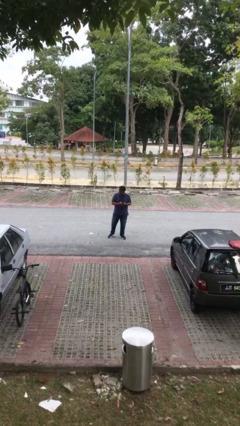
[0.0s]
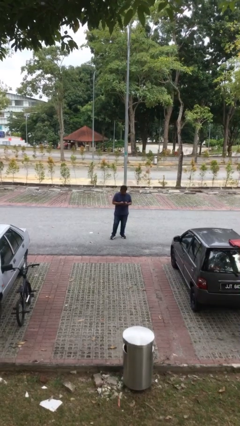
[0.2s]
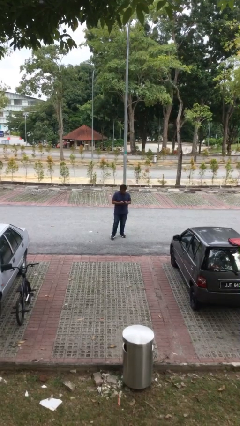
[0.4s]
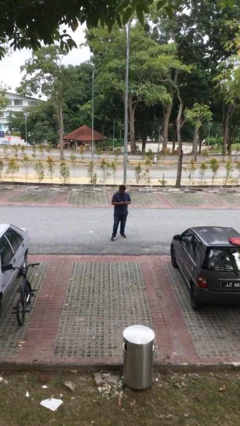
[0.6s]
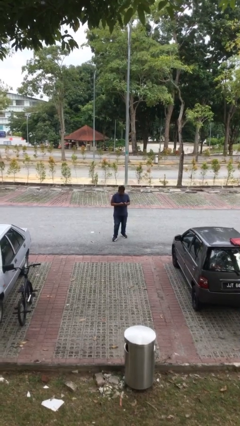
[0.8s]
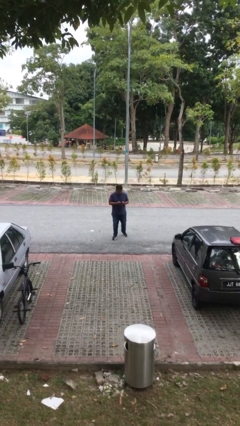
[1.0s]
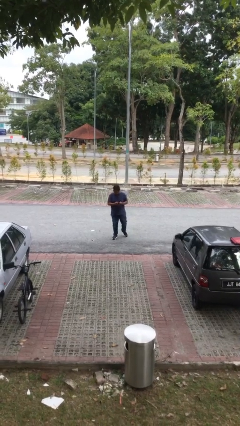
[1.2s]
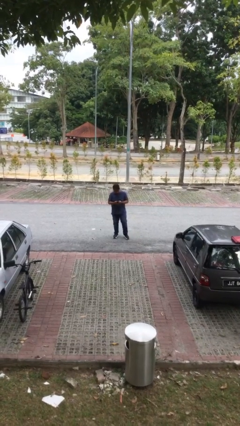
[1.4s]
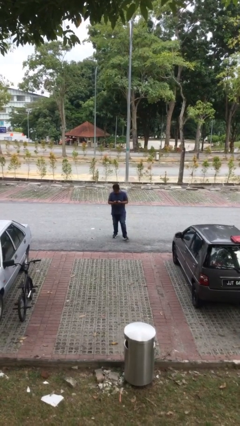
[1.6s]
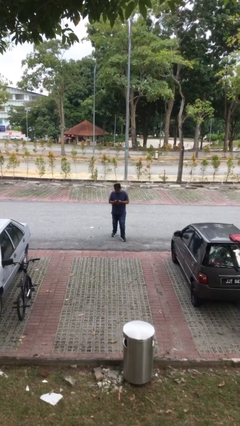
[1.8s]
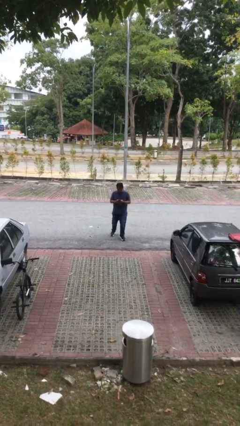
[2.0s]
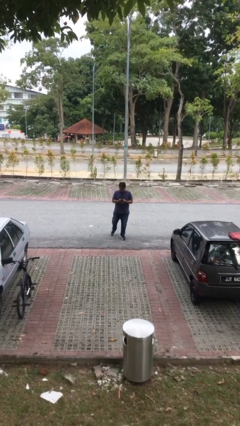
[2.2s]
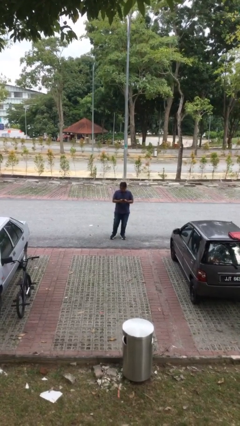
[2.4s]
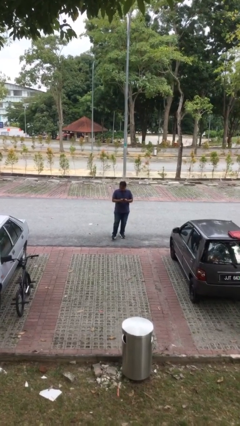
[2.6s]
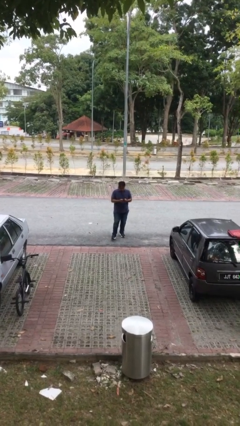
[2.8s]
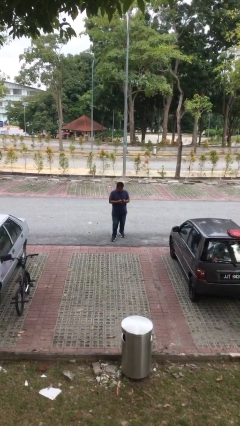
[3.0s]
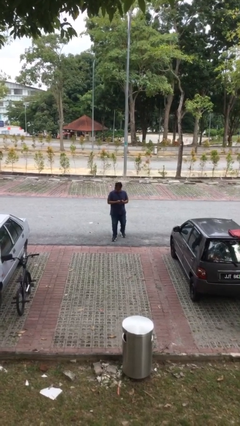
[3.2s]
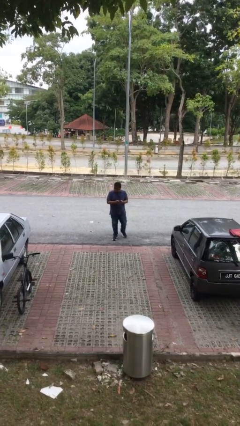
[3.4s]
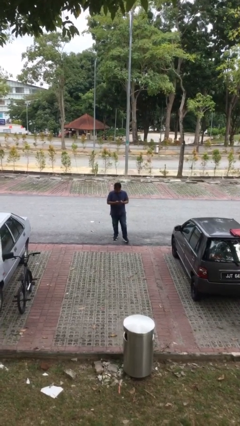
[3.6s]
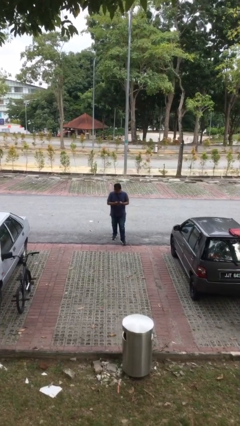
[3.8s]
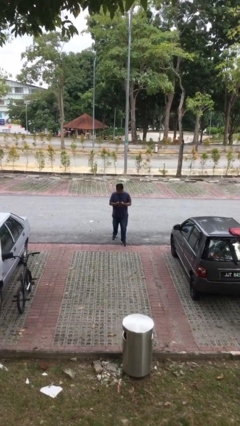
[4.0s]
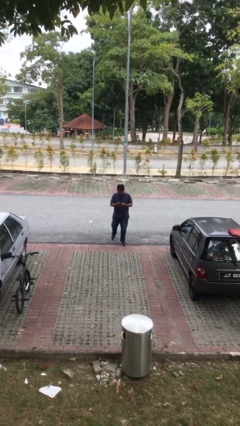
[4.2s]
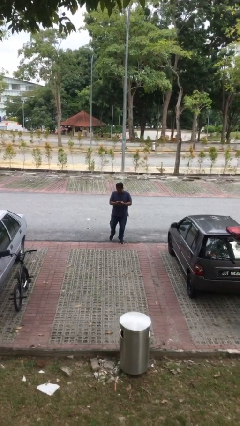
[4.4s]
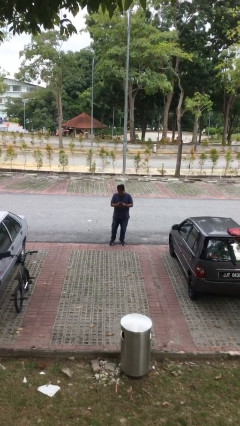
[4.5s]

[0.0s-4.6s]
person texts on phone

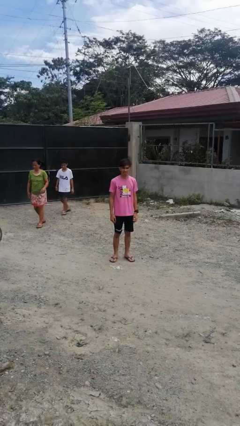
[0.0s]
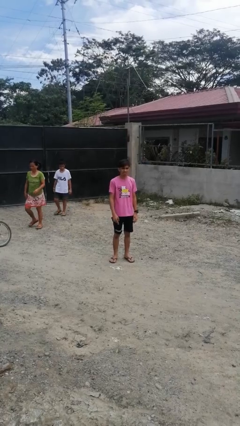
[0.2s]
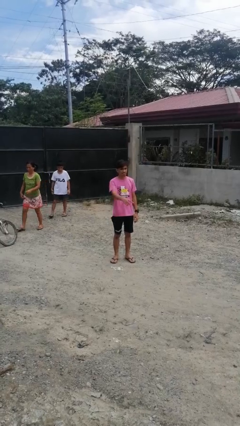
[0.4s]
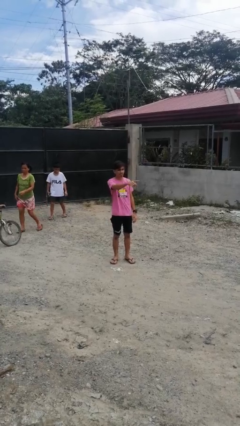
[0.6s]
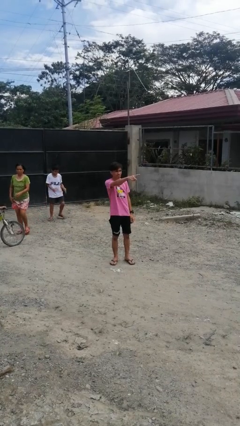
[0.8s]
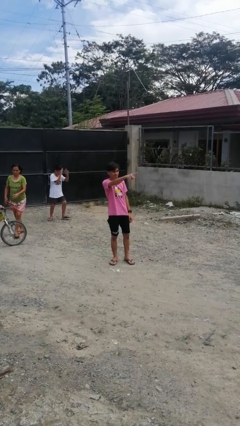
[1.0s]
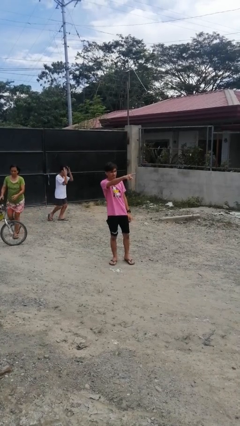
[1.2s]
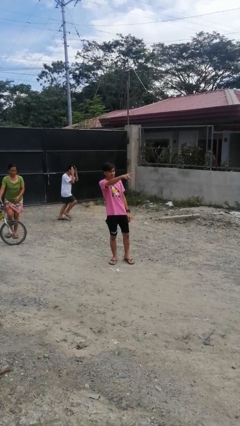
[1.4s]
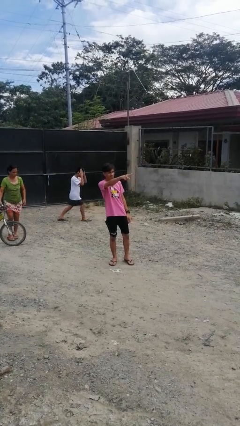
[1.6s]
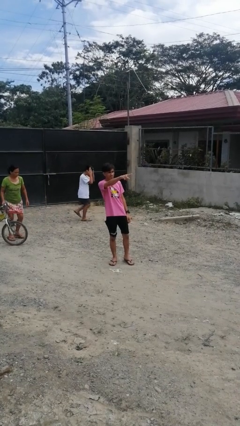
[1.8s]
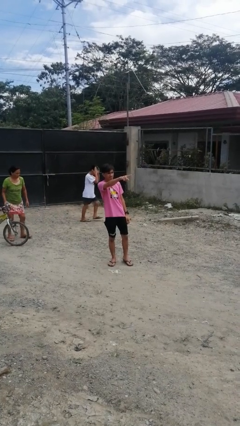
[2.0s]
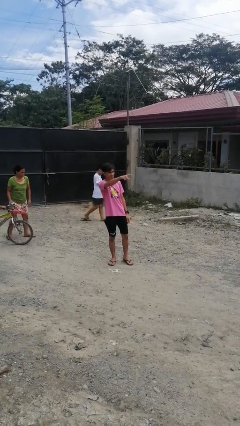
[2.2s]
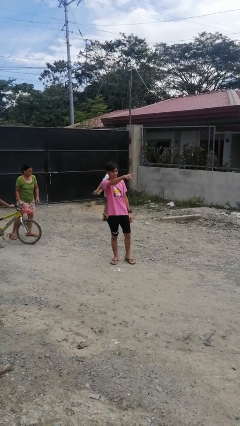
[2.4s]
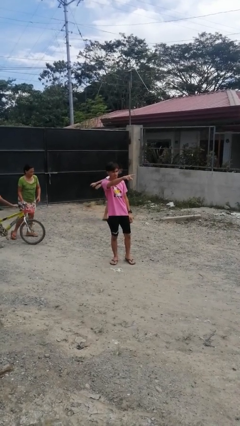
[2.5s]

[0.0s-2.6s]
person points at person

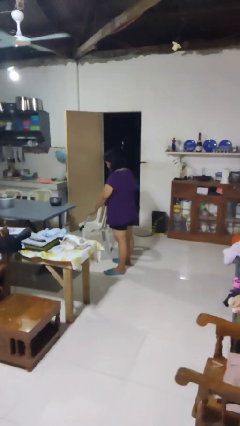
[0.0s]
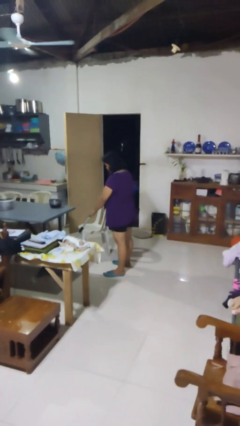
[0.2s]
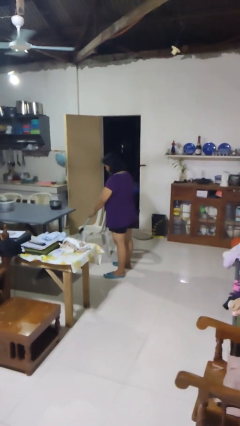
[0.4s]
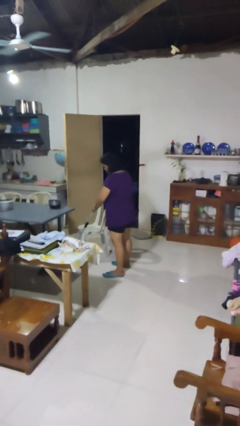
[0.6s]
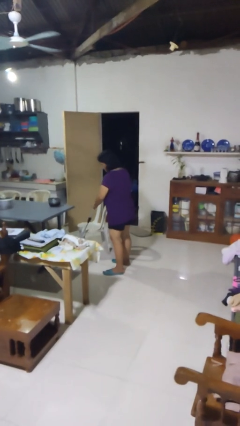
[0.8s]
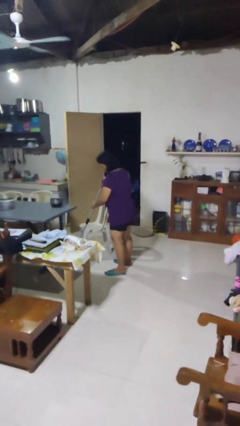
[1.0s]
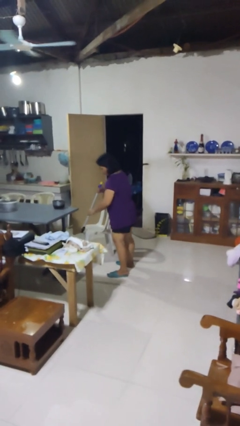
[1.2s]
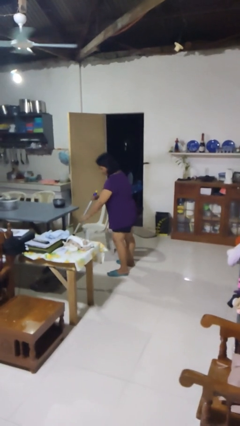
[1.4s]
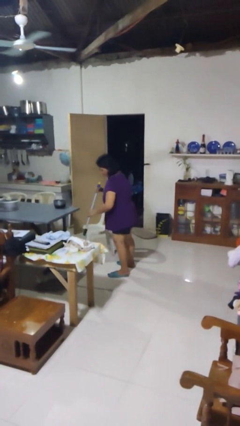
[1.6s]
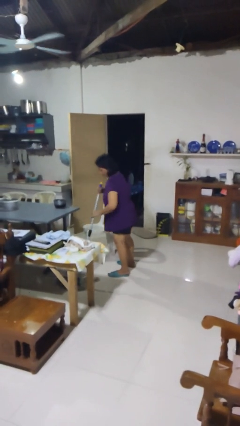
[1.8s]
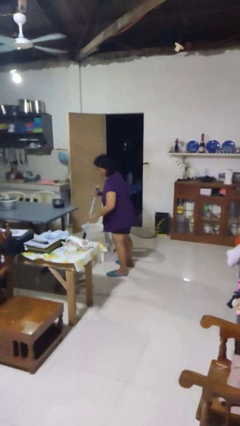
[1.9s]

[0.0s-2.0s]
person mops

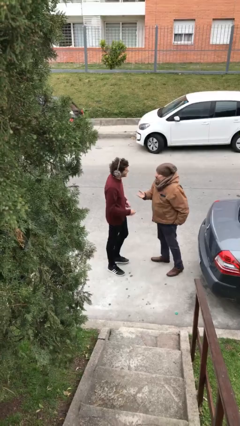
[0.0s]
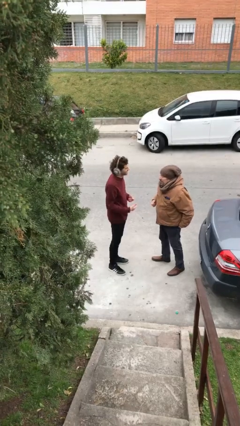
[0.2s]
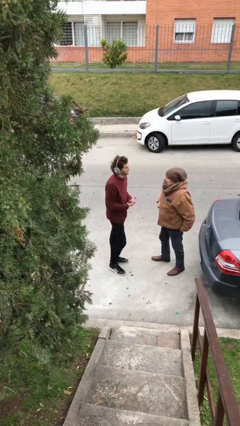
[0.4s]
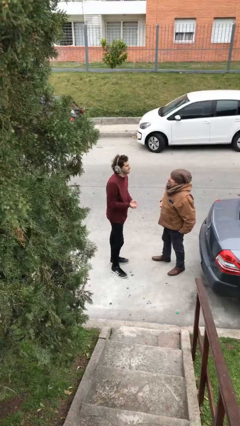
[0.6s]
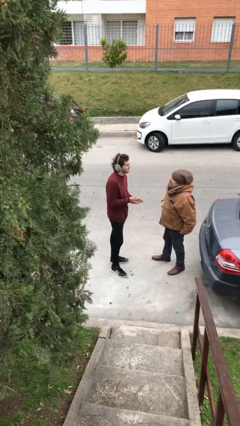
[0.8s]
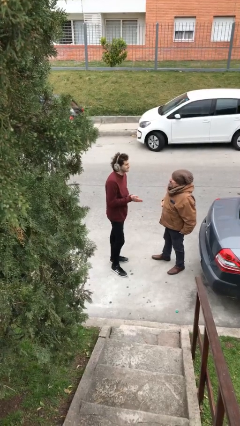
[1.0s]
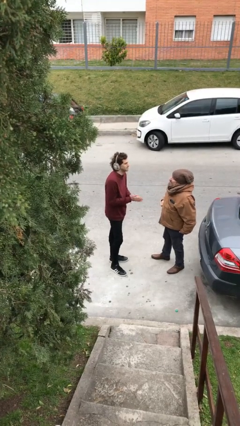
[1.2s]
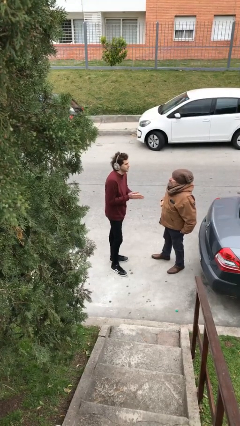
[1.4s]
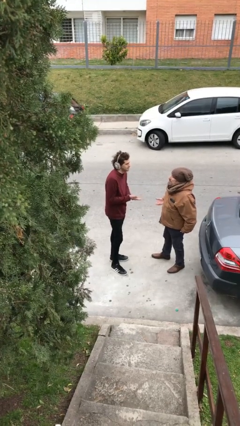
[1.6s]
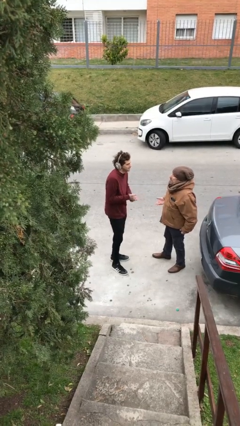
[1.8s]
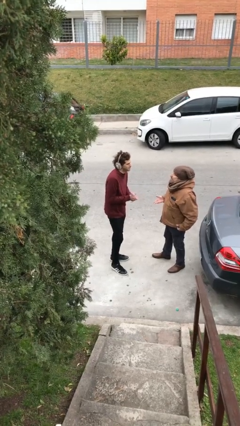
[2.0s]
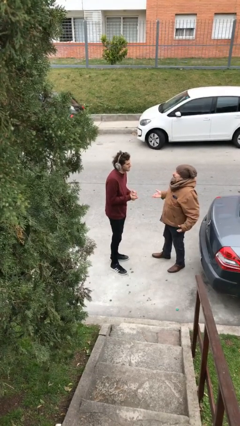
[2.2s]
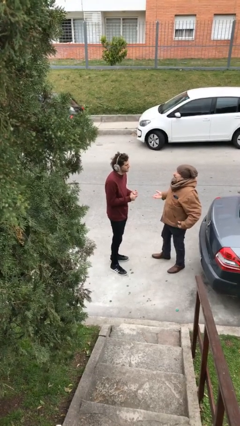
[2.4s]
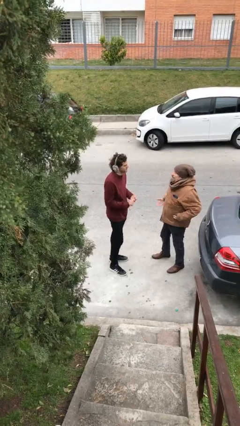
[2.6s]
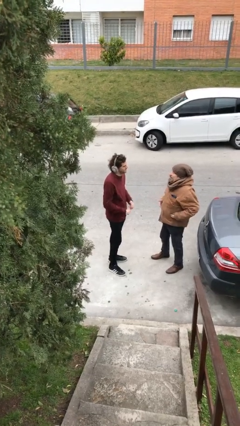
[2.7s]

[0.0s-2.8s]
person talks to person

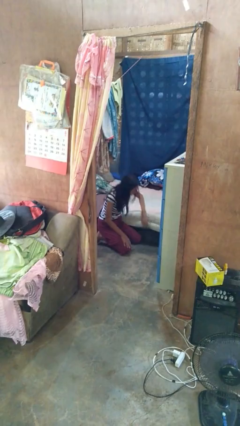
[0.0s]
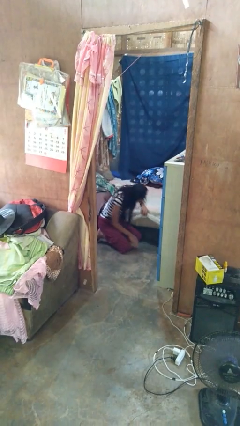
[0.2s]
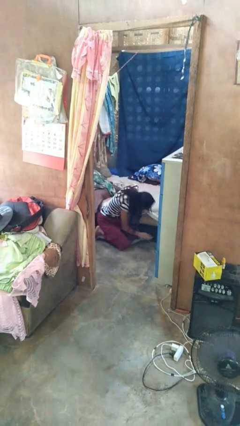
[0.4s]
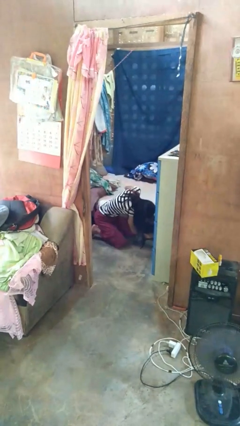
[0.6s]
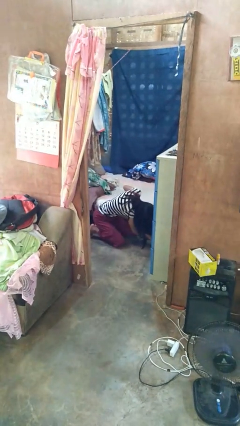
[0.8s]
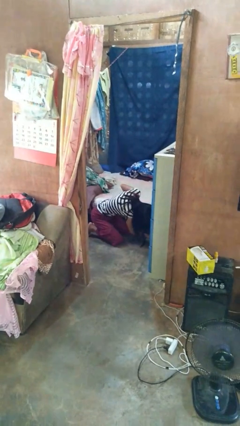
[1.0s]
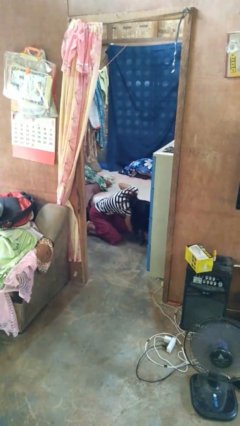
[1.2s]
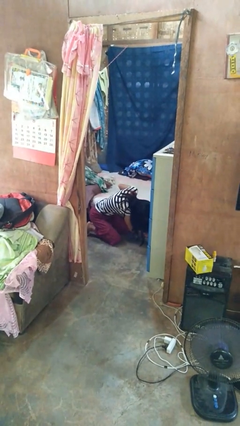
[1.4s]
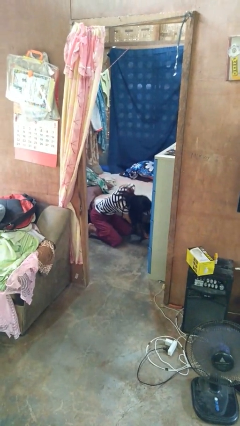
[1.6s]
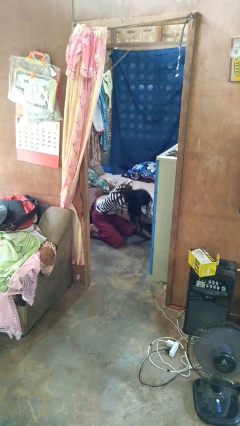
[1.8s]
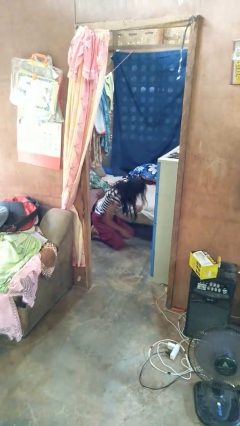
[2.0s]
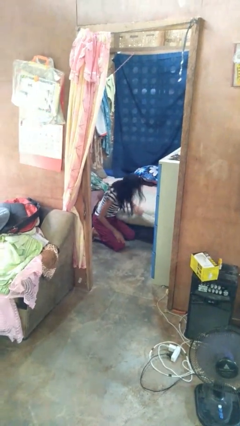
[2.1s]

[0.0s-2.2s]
person searches under bed

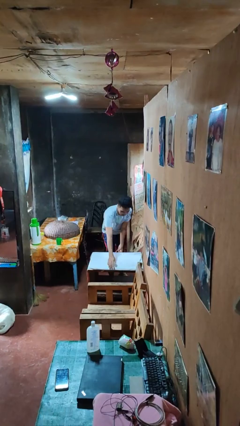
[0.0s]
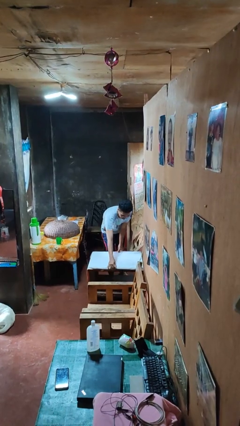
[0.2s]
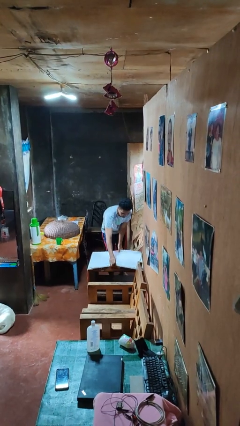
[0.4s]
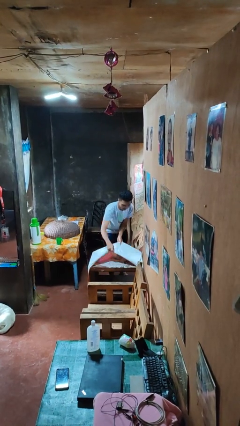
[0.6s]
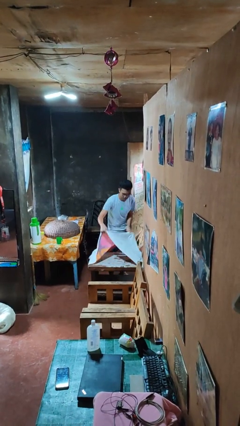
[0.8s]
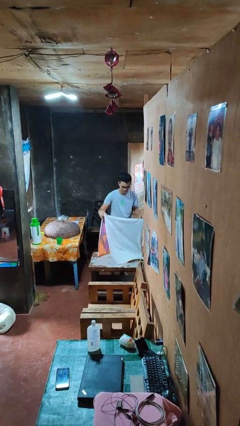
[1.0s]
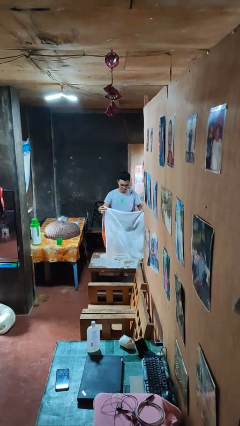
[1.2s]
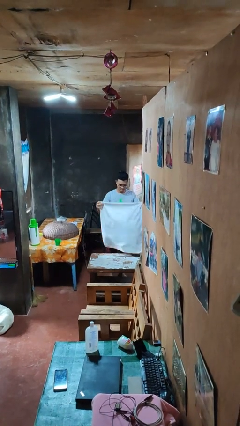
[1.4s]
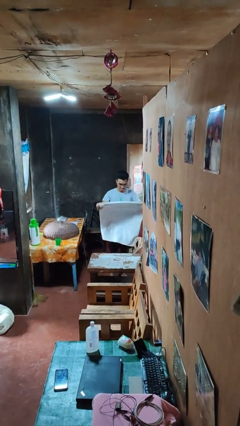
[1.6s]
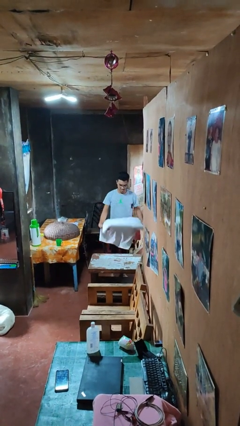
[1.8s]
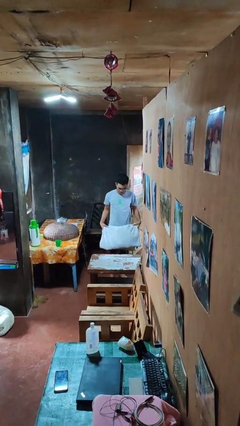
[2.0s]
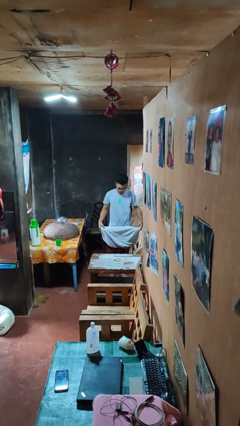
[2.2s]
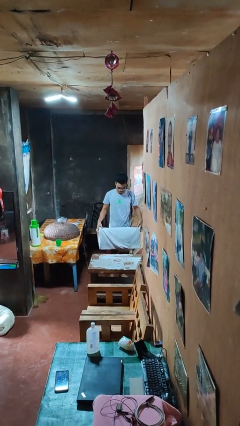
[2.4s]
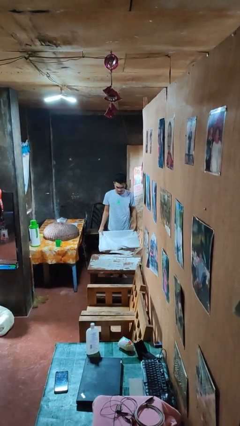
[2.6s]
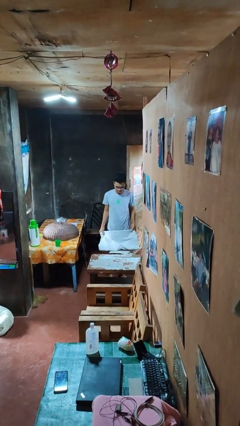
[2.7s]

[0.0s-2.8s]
person folds tablecloth

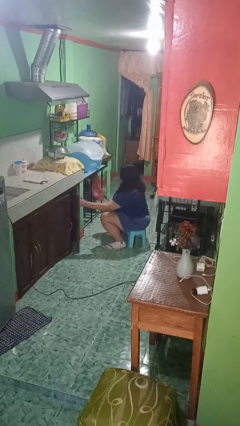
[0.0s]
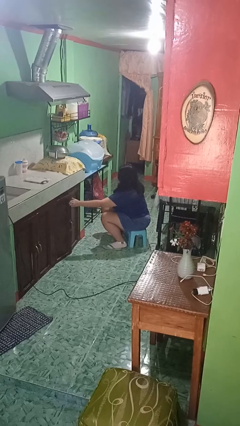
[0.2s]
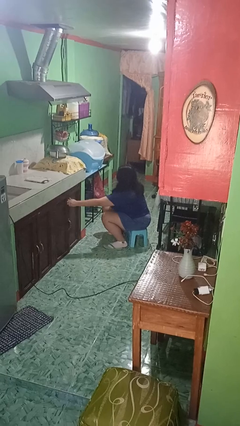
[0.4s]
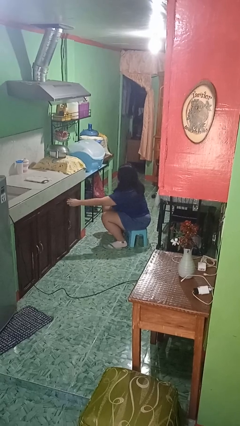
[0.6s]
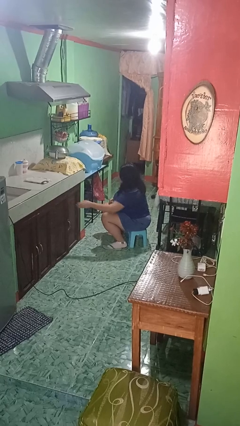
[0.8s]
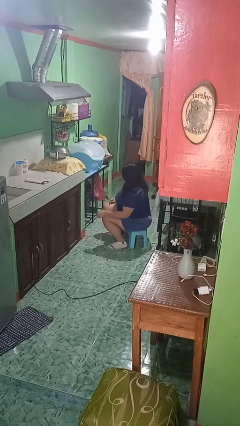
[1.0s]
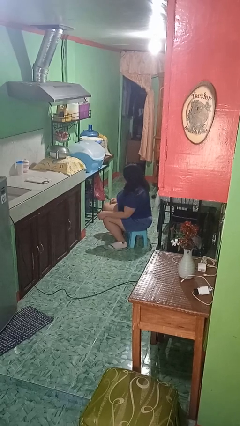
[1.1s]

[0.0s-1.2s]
person closes cabinet
